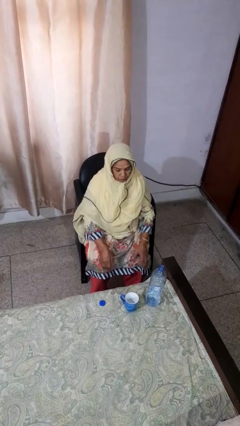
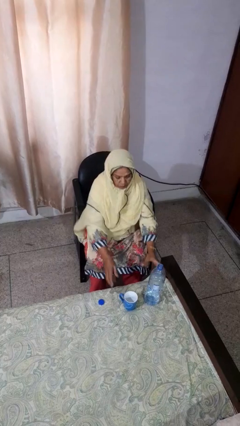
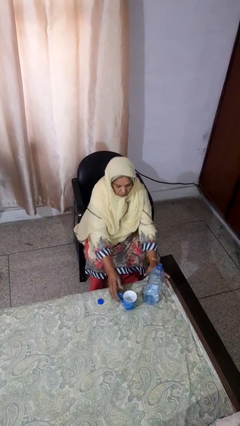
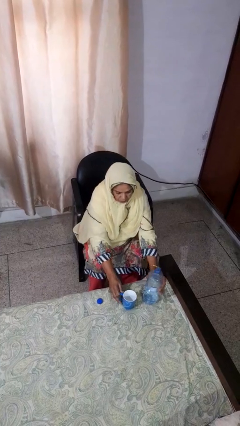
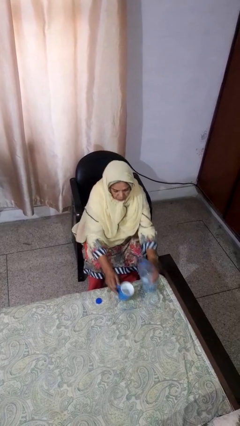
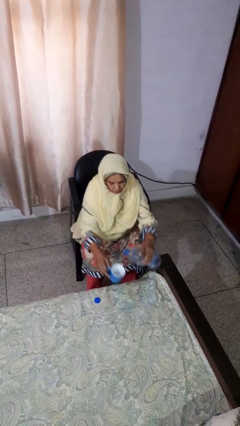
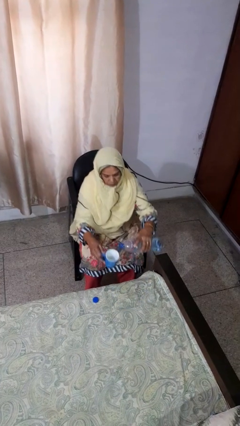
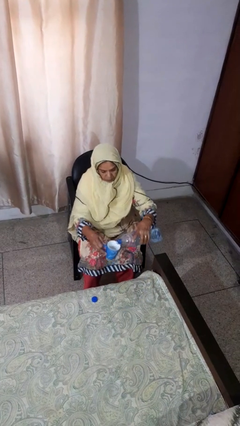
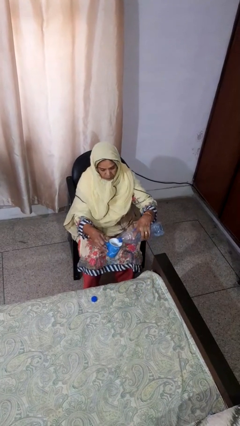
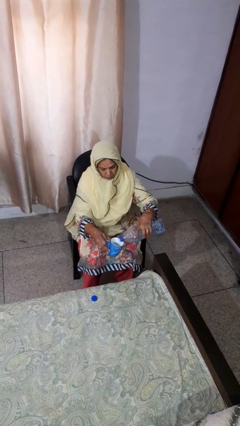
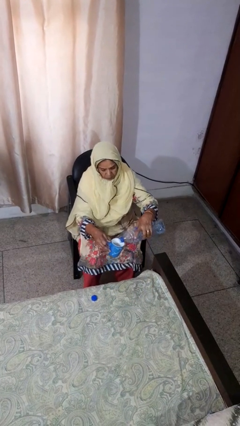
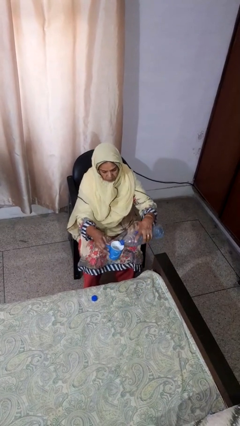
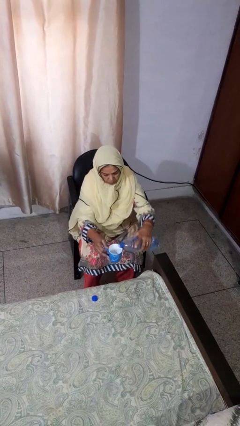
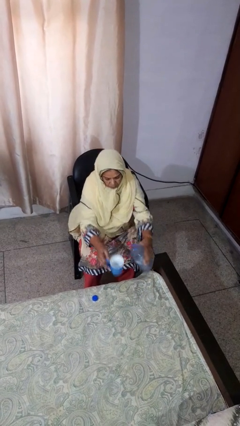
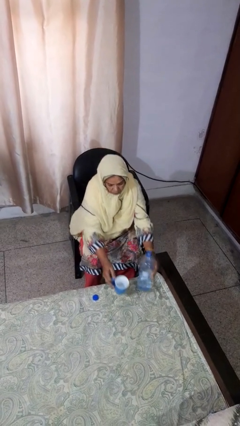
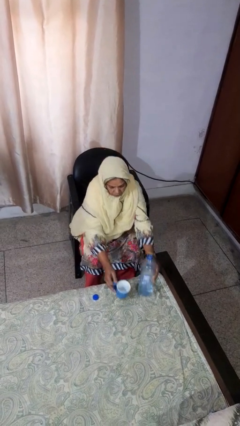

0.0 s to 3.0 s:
person pours liquid into cup

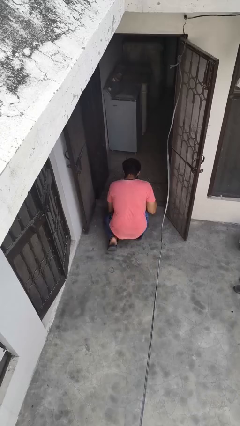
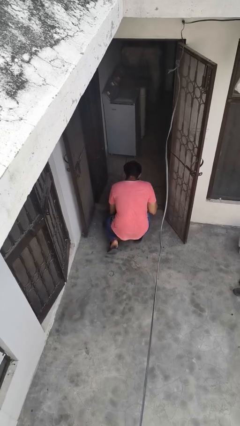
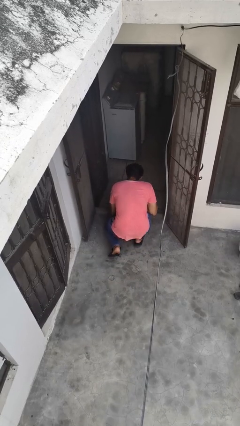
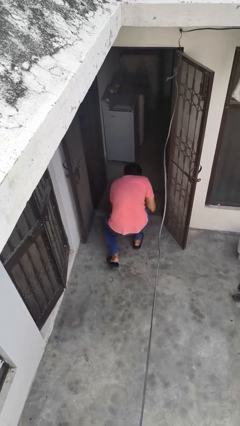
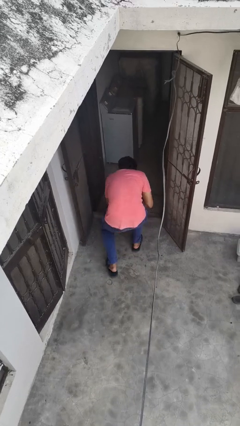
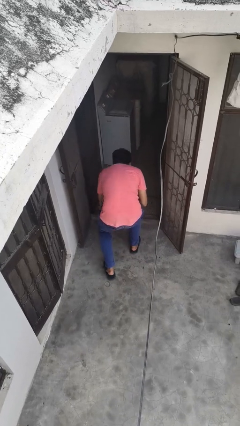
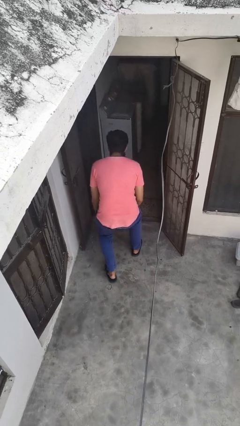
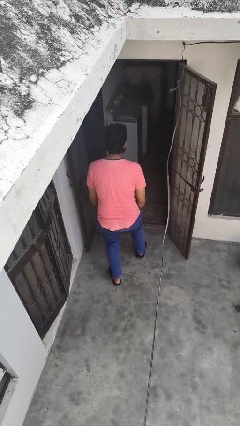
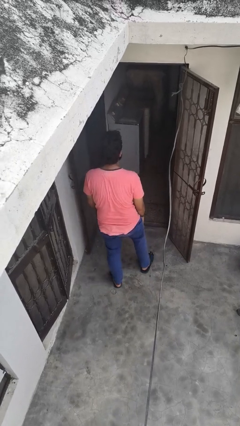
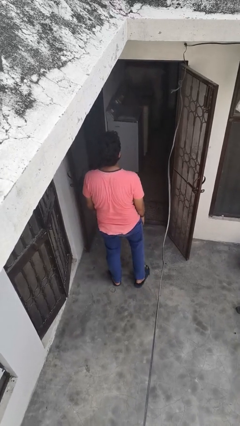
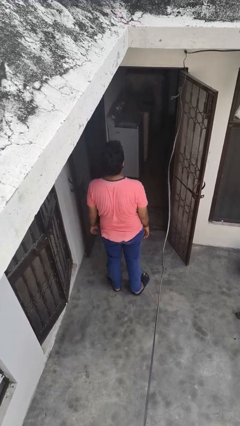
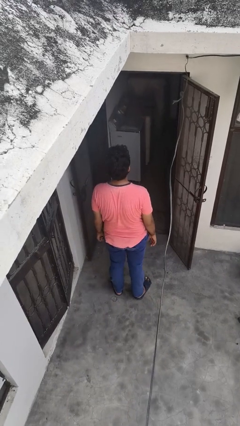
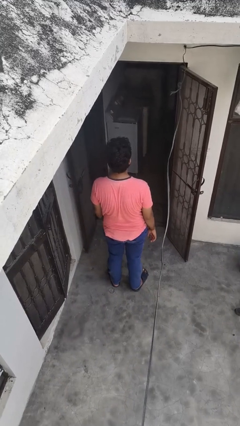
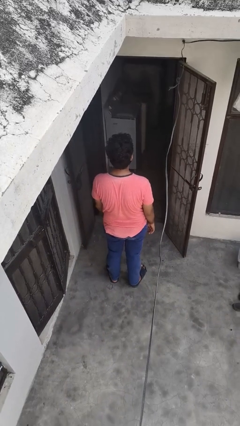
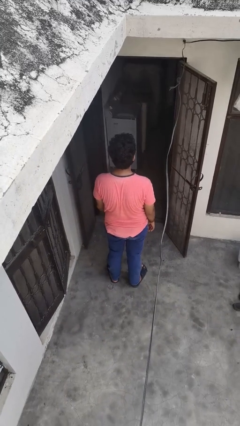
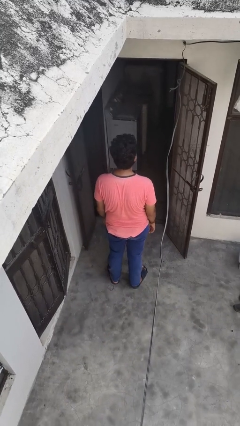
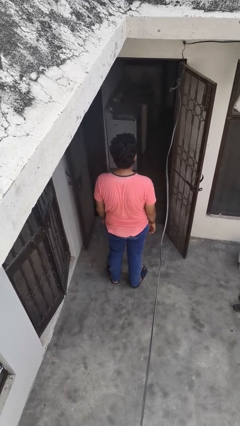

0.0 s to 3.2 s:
person stands up from floor

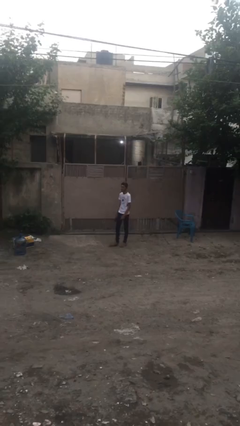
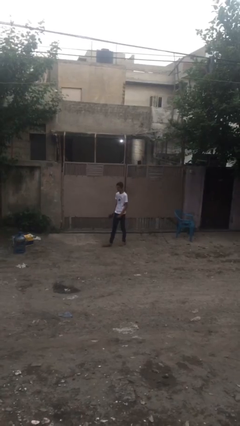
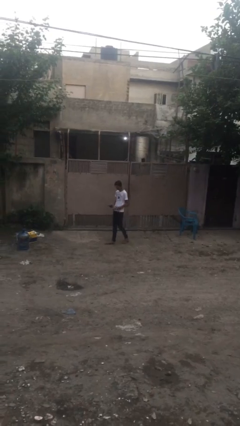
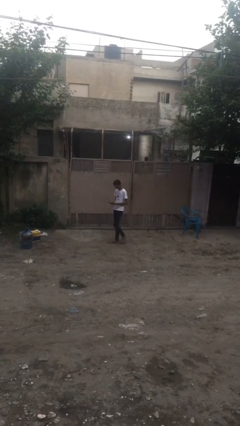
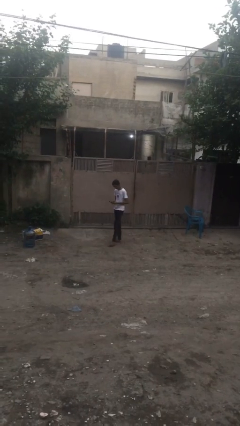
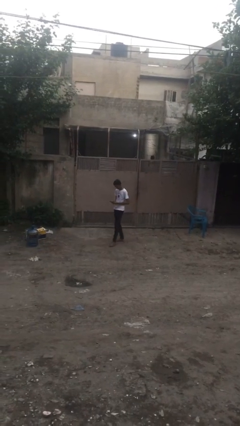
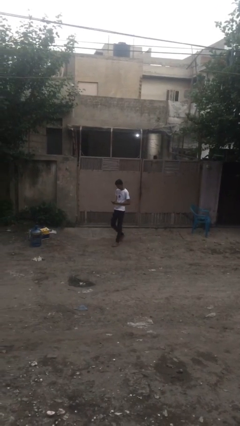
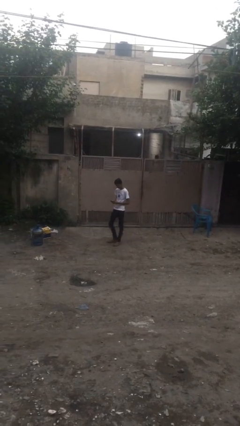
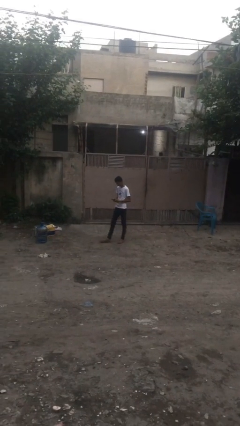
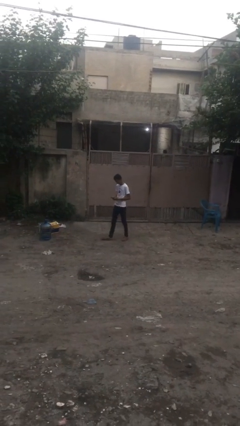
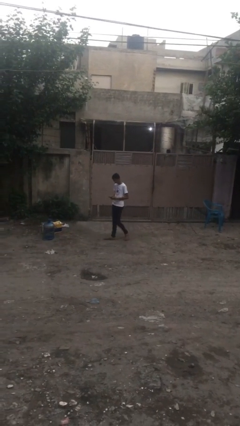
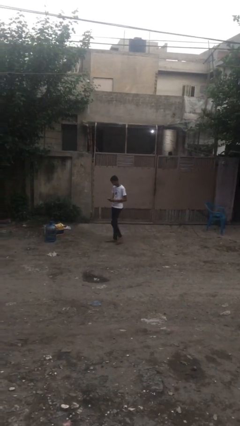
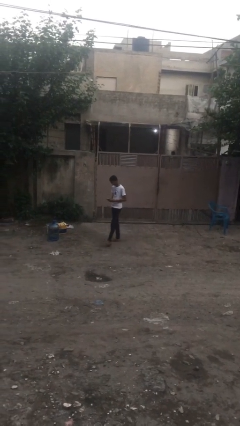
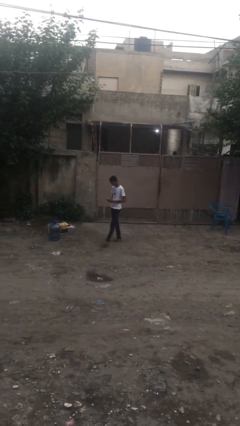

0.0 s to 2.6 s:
person texts on phone

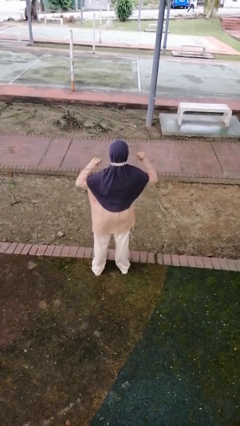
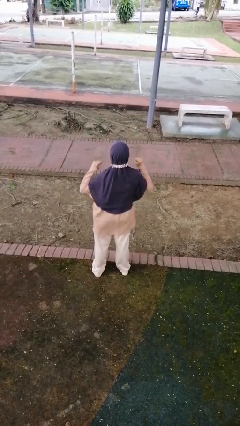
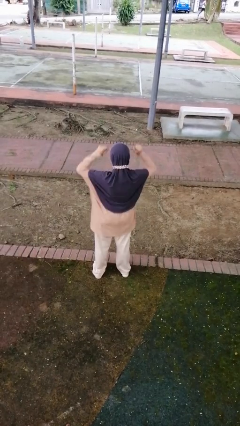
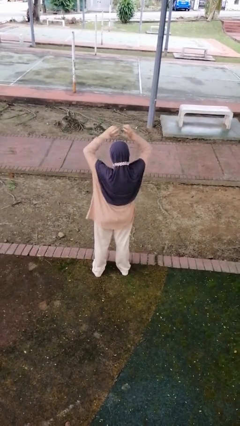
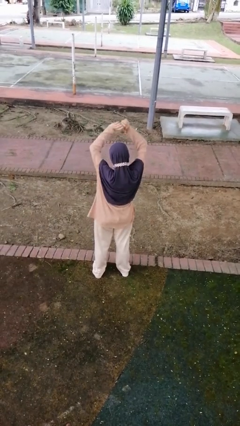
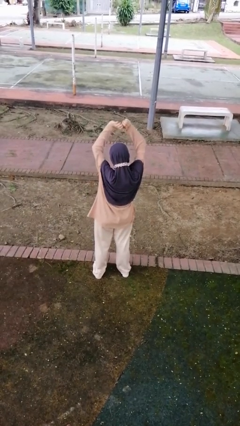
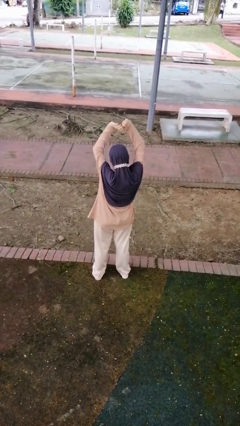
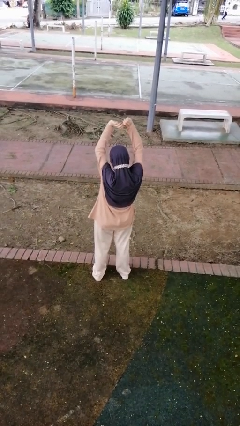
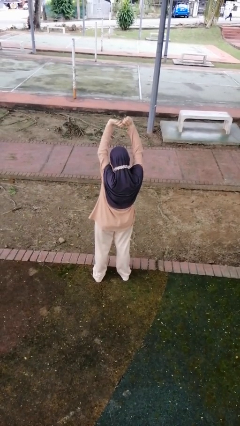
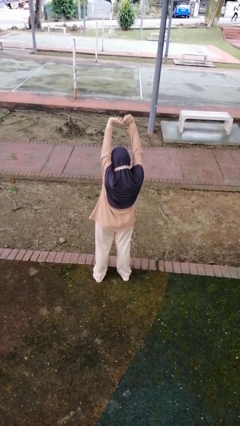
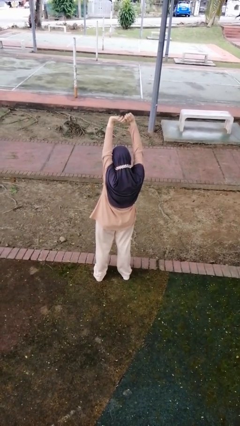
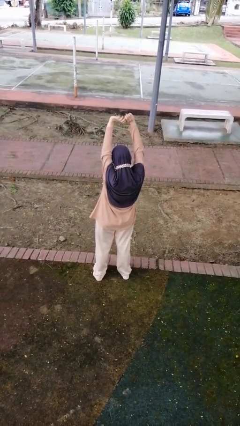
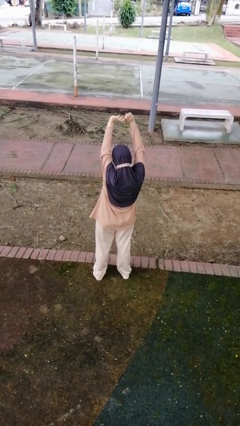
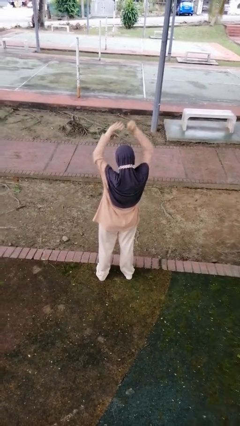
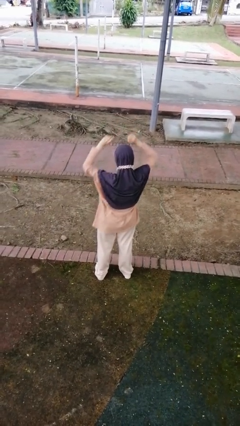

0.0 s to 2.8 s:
person stretches arms over head

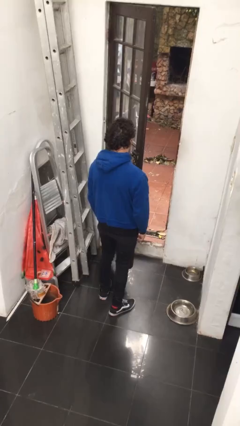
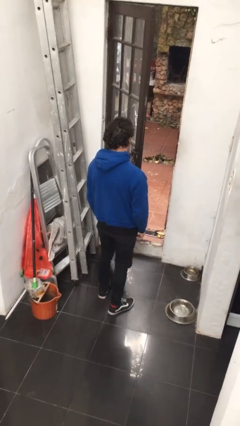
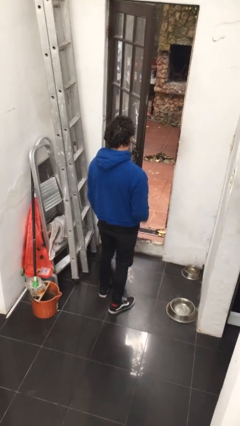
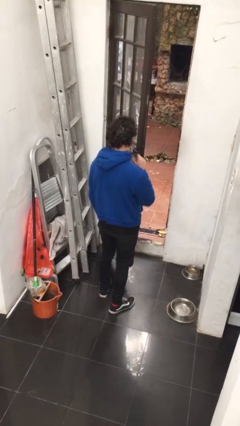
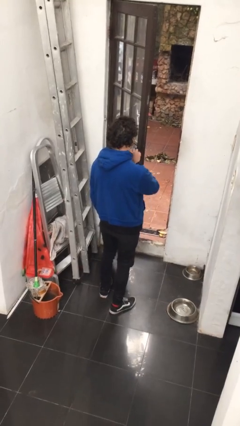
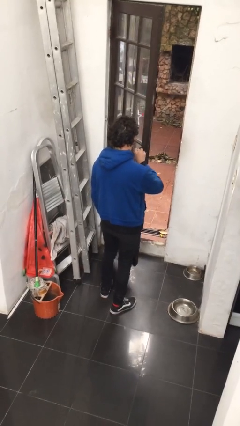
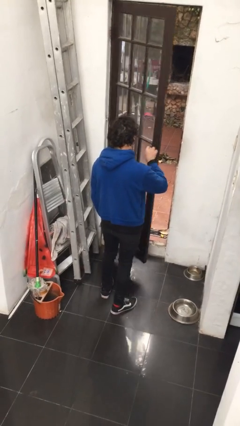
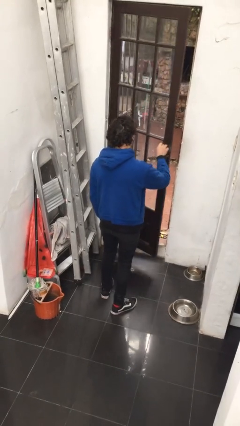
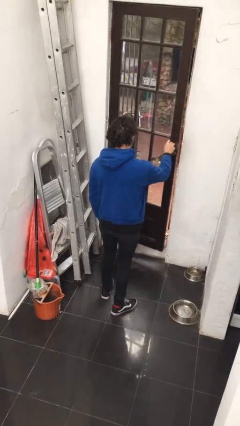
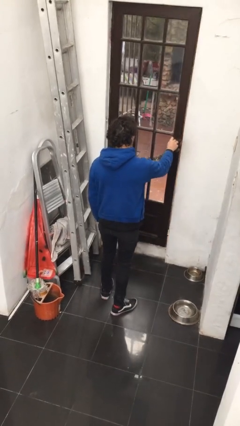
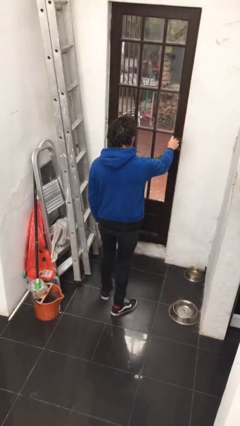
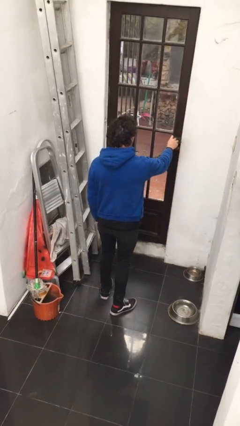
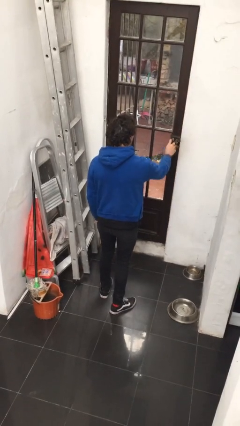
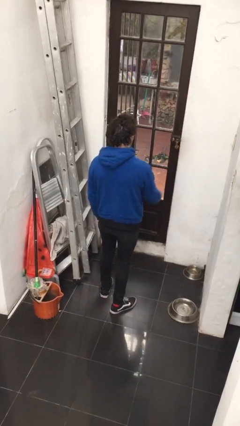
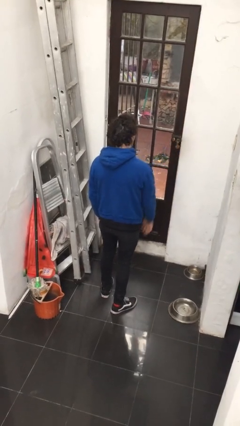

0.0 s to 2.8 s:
person closes facility door

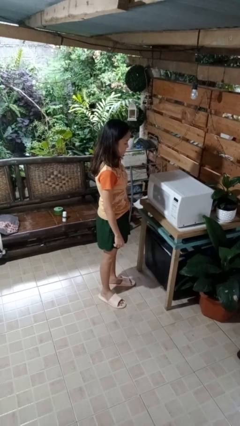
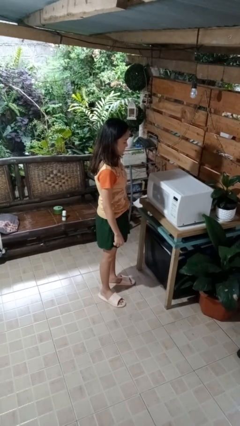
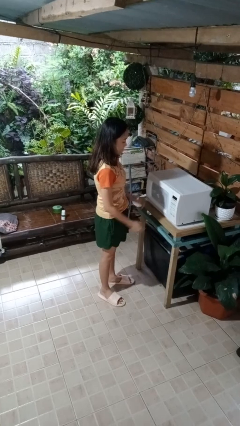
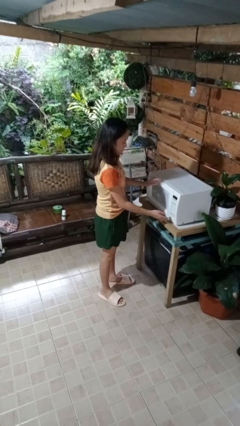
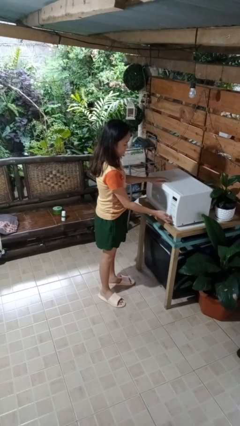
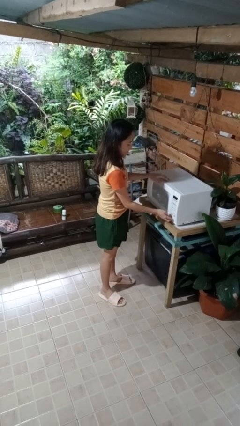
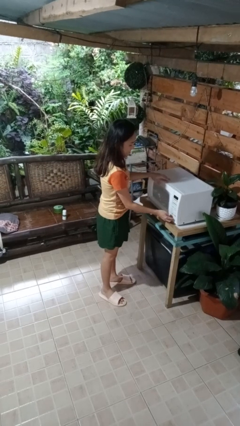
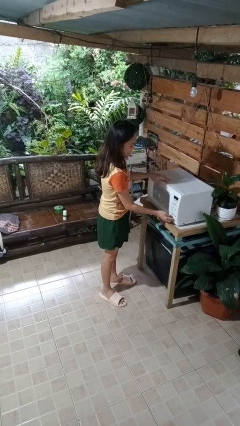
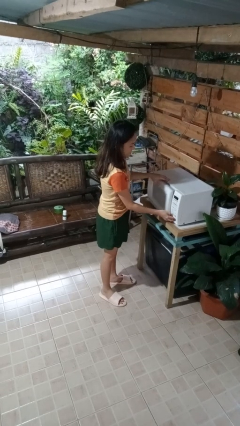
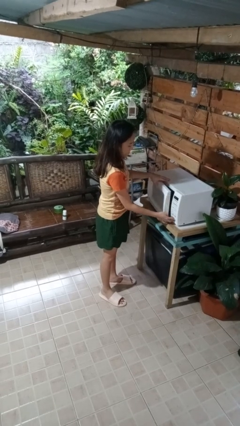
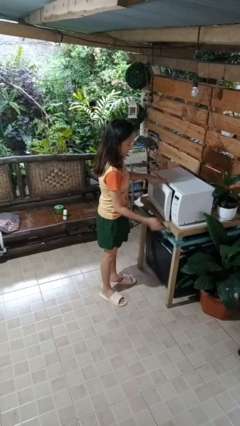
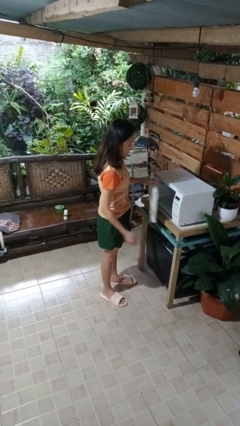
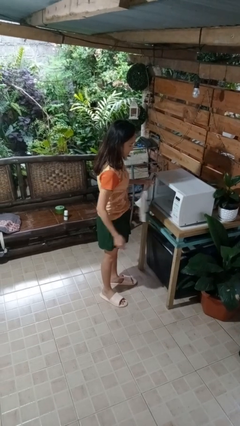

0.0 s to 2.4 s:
person opens microwave

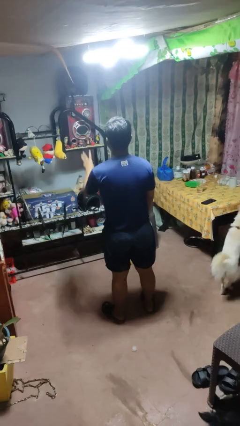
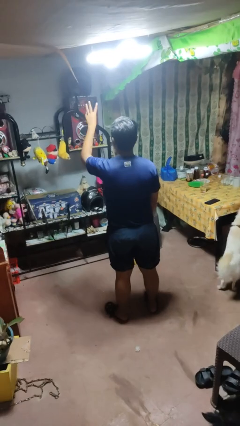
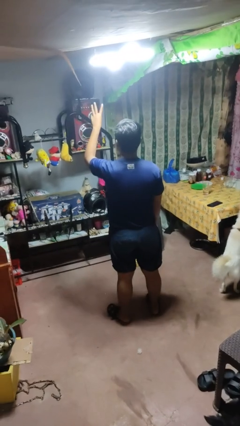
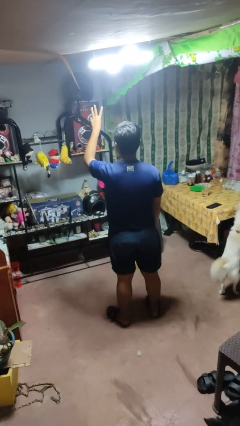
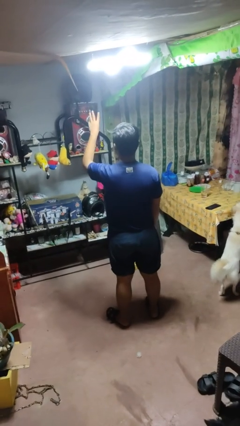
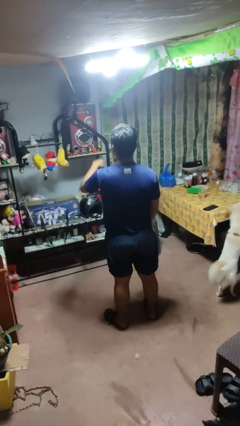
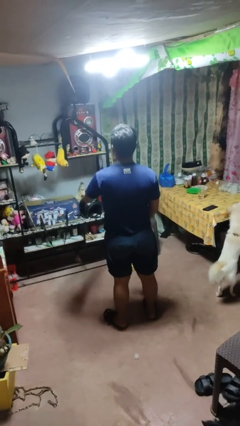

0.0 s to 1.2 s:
person gestures number three
